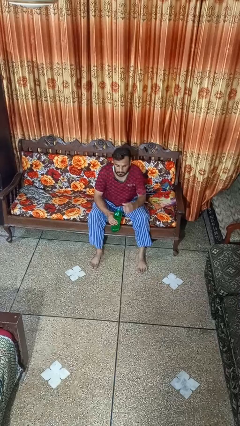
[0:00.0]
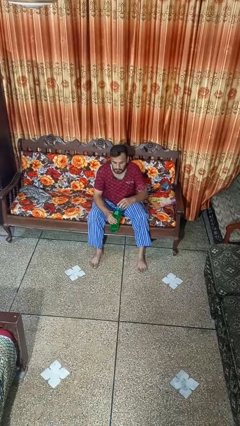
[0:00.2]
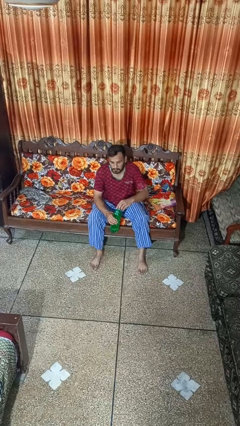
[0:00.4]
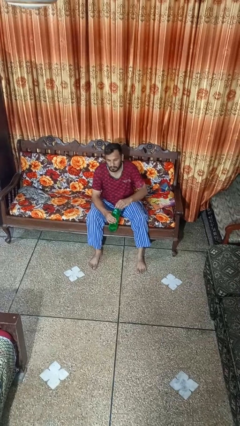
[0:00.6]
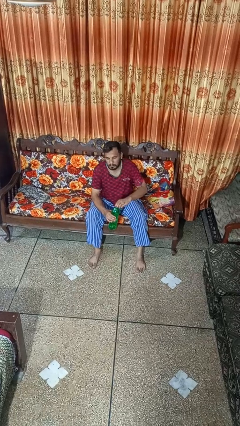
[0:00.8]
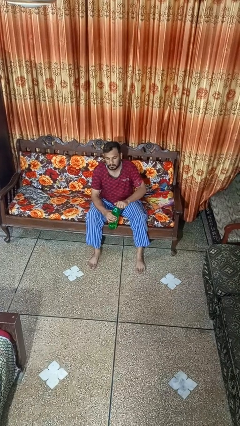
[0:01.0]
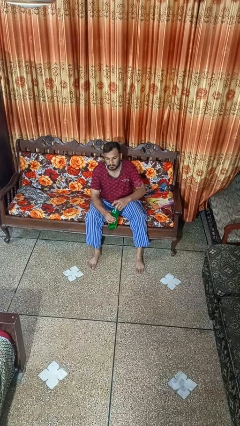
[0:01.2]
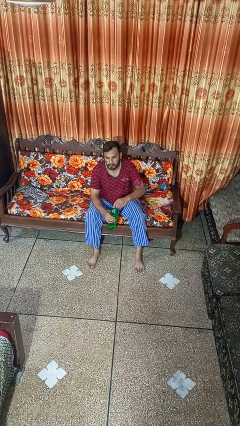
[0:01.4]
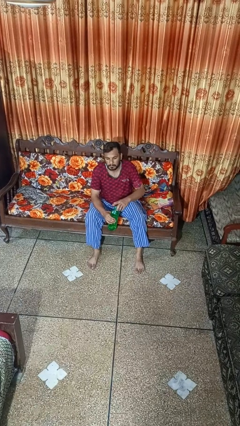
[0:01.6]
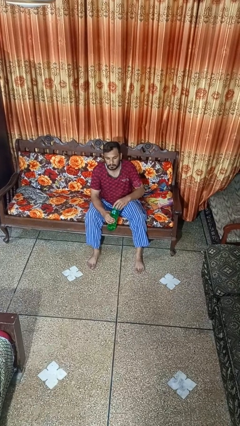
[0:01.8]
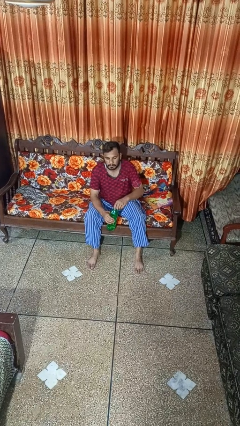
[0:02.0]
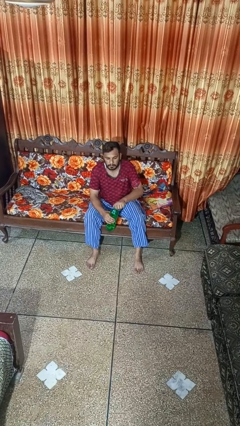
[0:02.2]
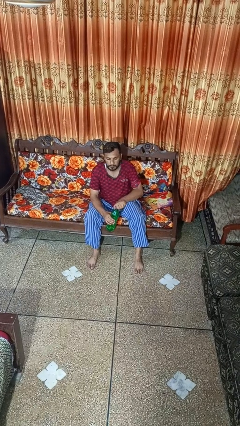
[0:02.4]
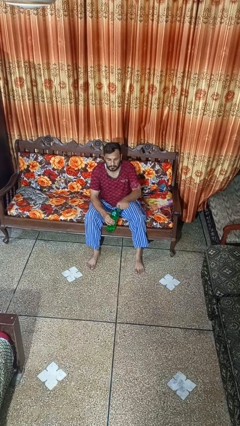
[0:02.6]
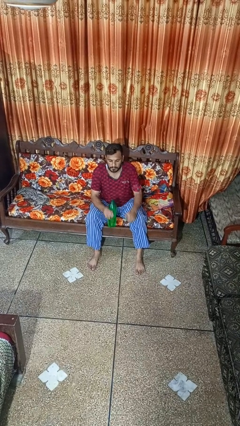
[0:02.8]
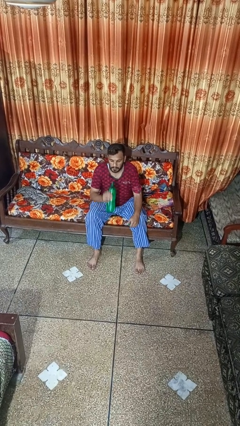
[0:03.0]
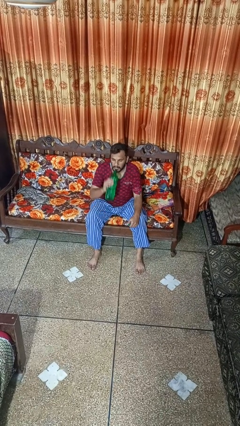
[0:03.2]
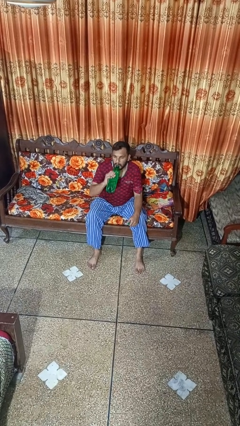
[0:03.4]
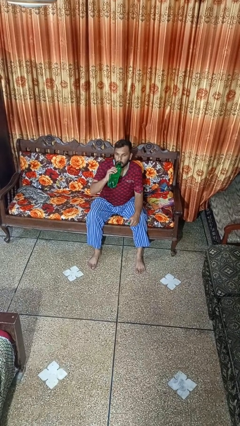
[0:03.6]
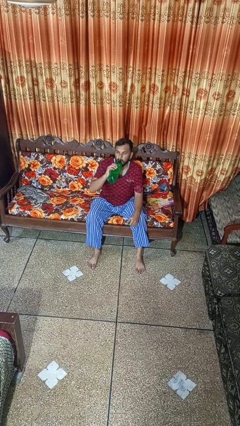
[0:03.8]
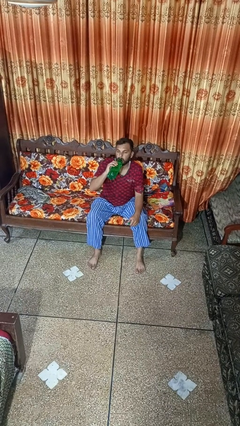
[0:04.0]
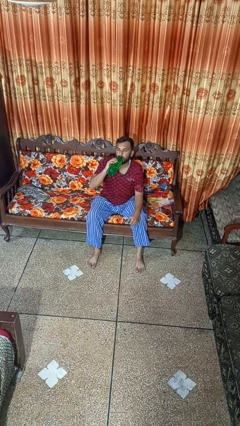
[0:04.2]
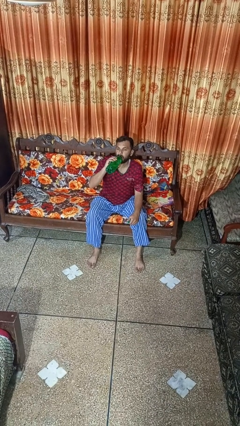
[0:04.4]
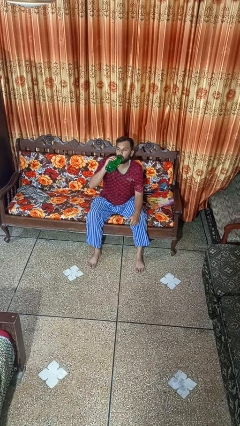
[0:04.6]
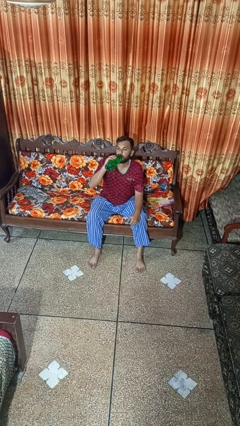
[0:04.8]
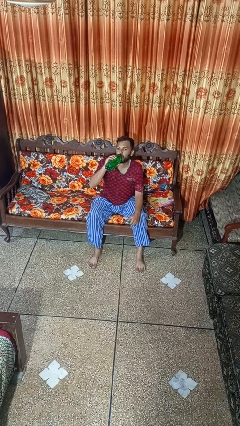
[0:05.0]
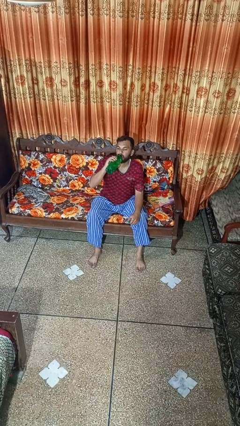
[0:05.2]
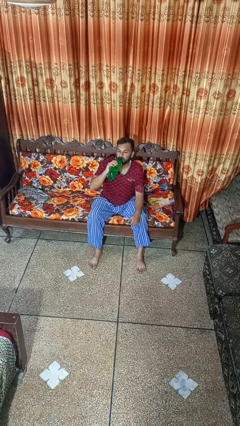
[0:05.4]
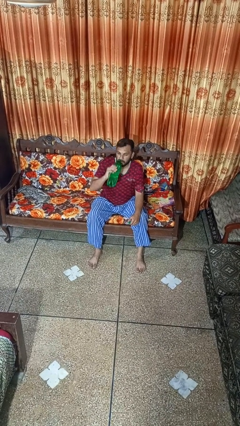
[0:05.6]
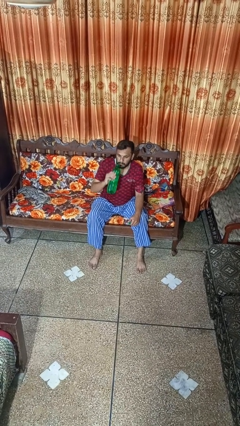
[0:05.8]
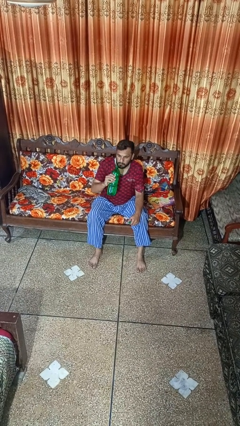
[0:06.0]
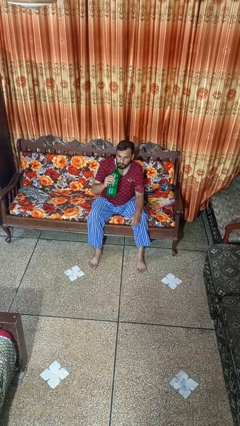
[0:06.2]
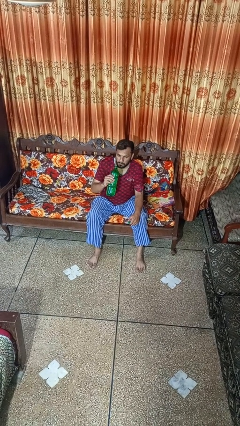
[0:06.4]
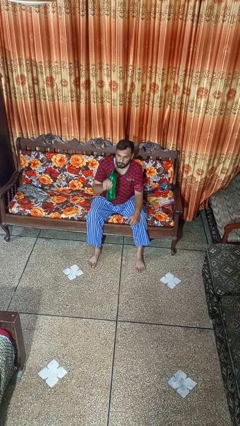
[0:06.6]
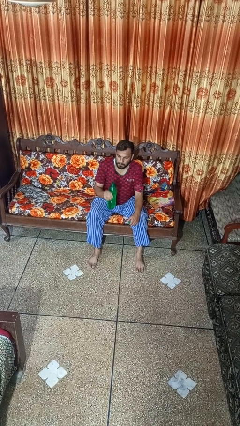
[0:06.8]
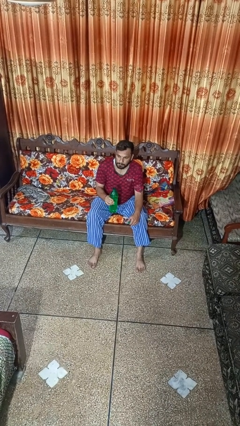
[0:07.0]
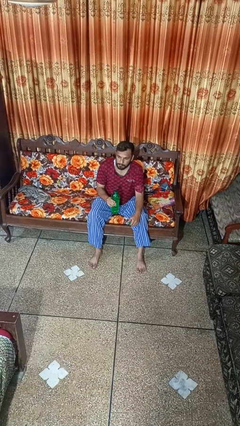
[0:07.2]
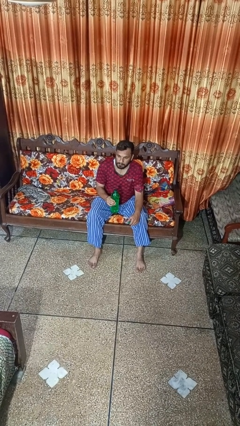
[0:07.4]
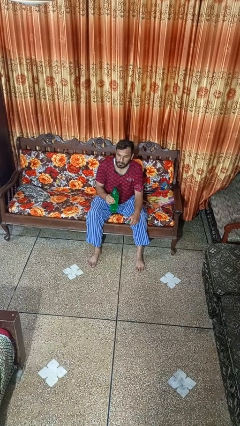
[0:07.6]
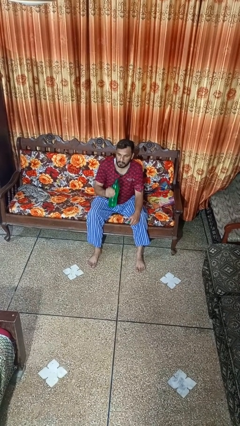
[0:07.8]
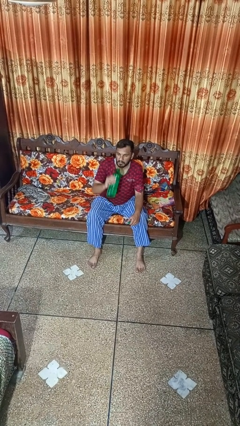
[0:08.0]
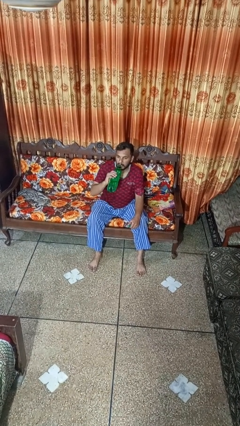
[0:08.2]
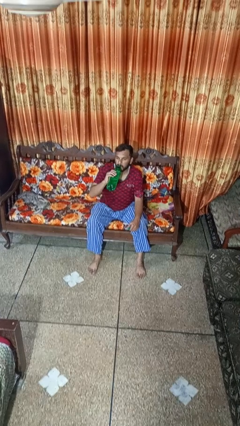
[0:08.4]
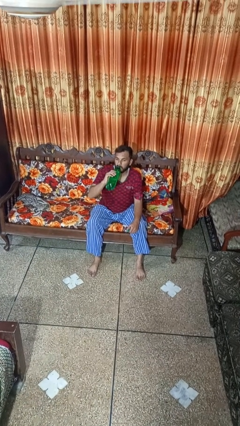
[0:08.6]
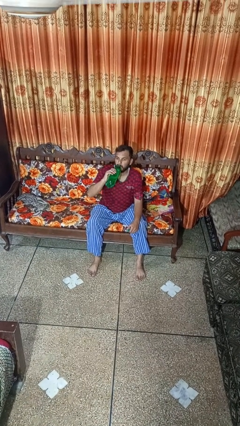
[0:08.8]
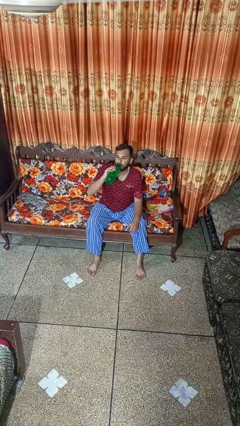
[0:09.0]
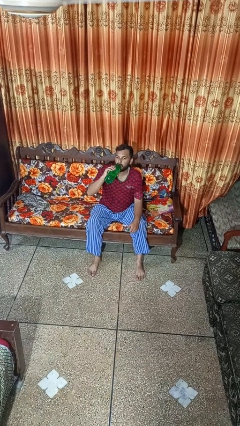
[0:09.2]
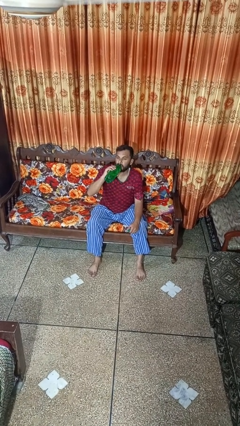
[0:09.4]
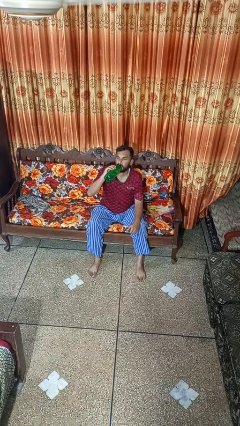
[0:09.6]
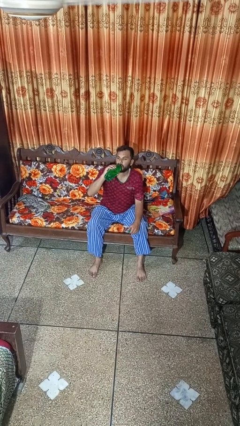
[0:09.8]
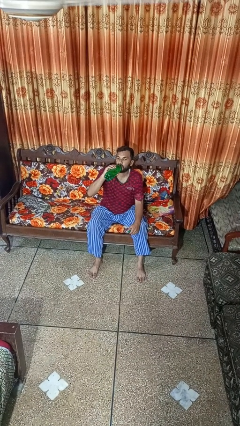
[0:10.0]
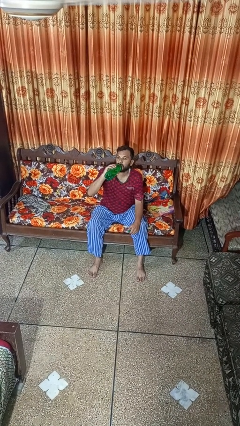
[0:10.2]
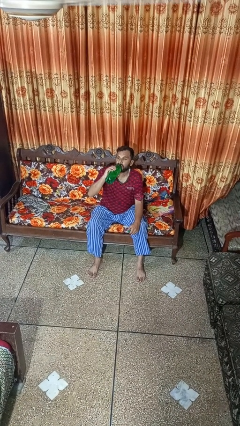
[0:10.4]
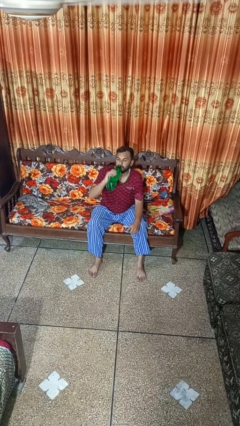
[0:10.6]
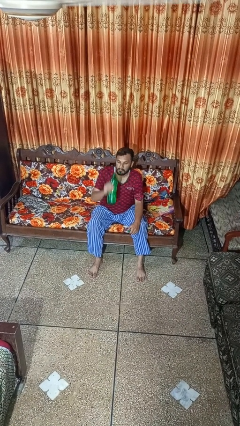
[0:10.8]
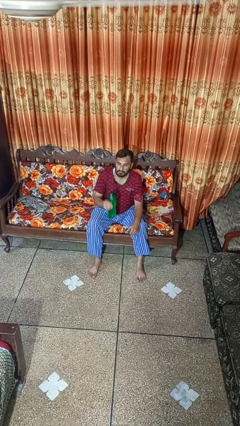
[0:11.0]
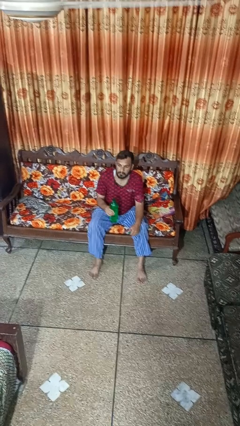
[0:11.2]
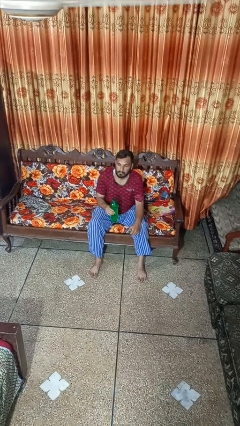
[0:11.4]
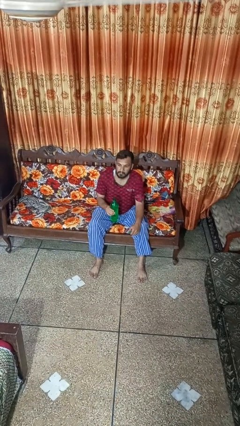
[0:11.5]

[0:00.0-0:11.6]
person drinks from bottle

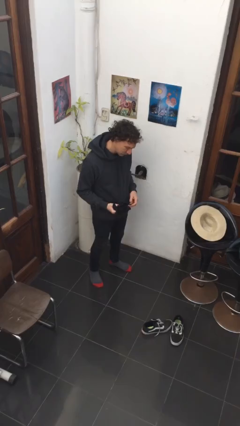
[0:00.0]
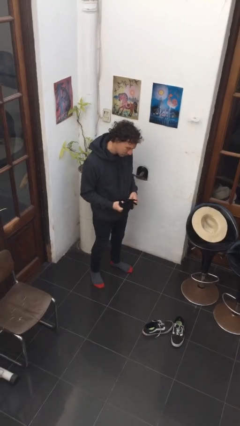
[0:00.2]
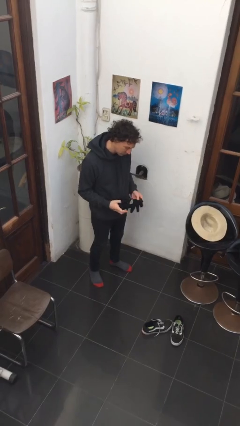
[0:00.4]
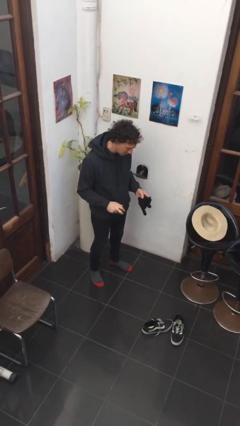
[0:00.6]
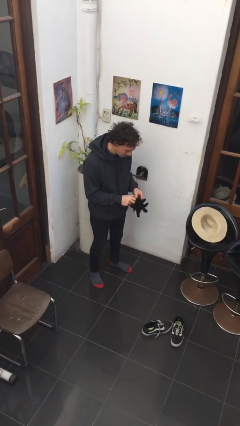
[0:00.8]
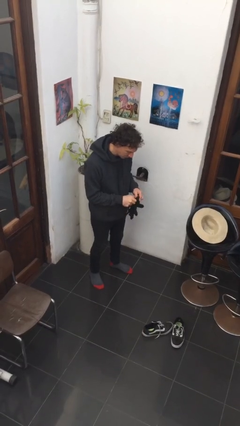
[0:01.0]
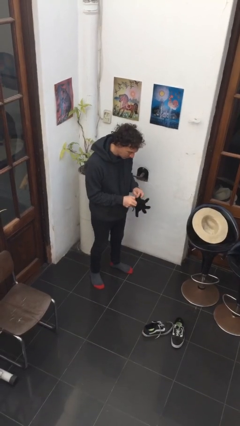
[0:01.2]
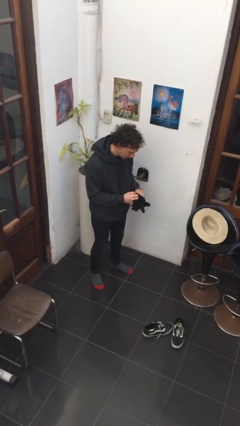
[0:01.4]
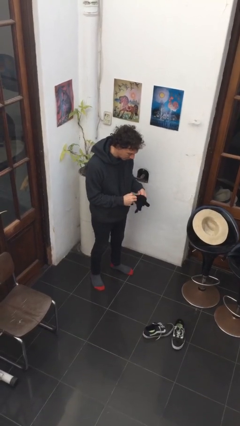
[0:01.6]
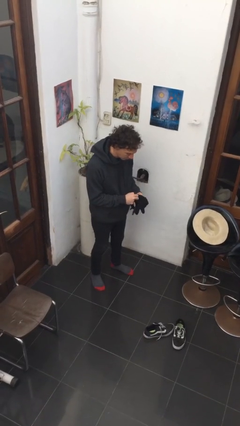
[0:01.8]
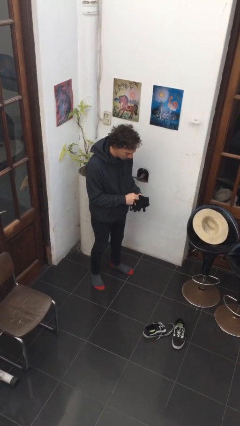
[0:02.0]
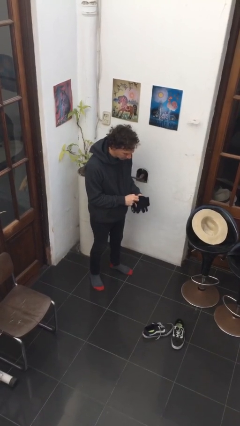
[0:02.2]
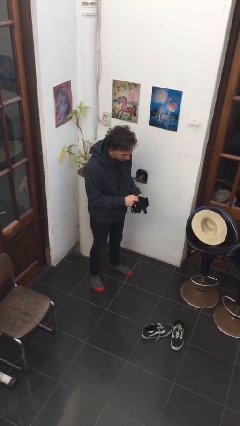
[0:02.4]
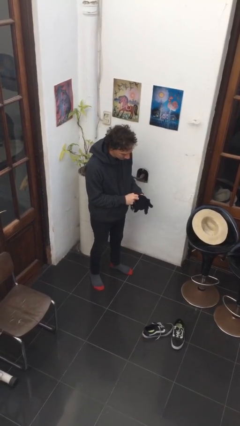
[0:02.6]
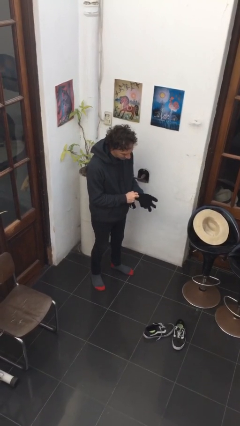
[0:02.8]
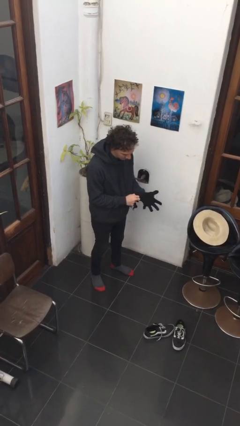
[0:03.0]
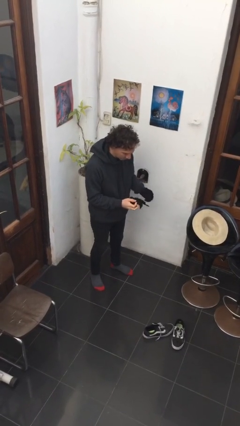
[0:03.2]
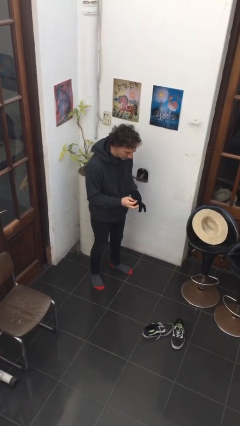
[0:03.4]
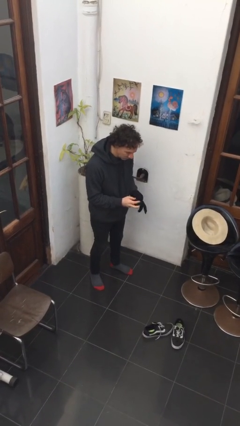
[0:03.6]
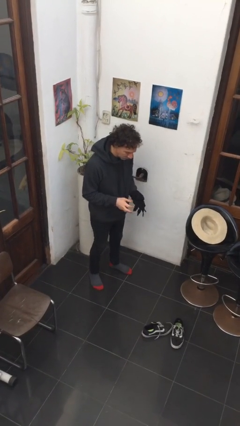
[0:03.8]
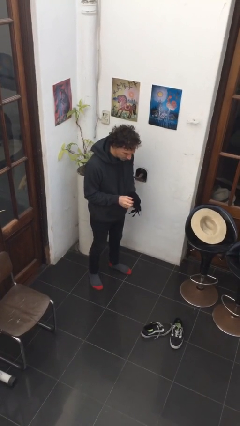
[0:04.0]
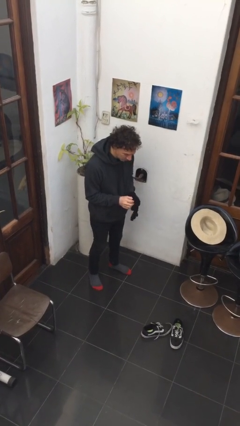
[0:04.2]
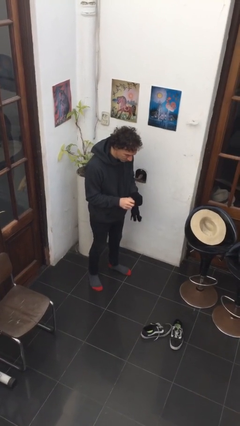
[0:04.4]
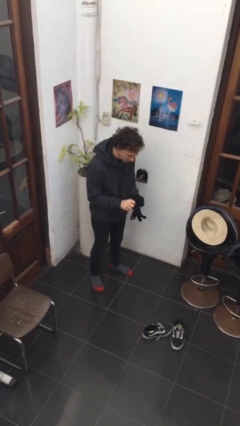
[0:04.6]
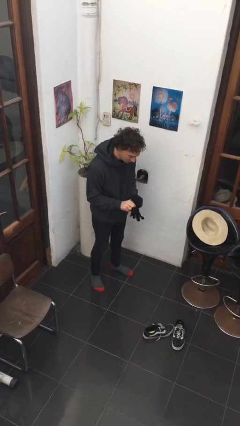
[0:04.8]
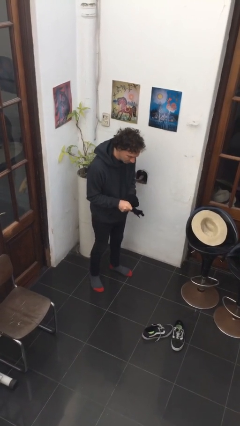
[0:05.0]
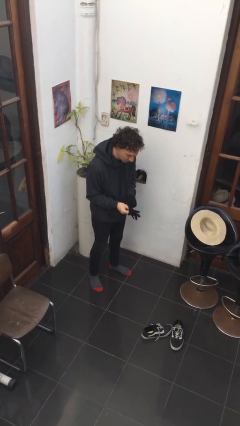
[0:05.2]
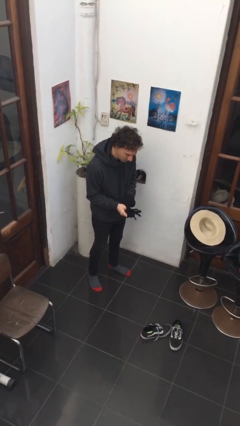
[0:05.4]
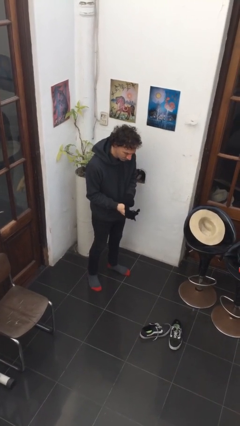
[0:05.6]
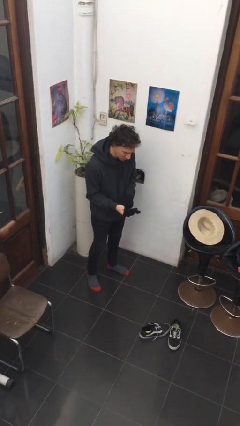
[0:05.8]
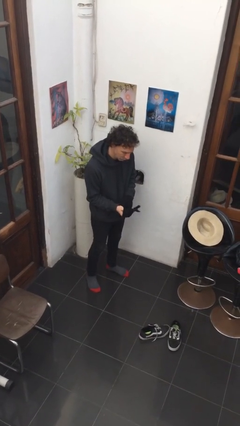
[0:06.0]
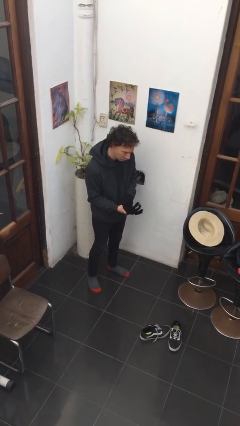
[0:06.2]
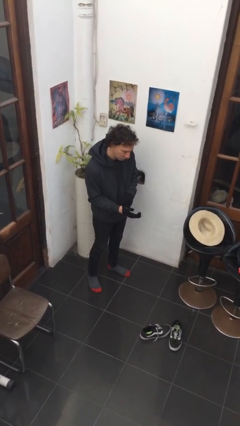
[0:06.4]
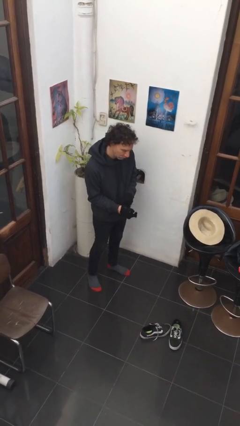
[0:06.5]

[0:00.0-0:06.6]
person puts on gloves
